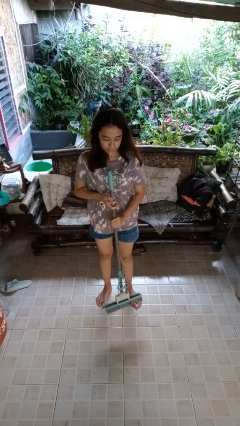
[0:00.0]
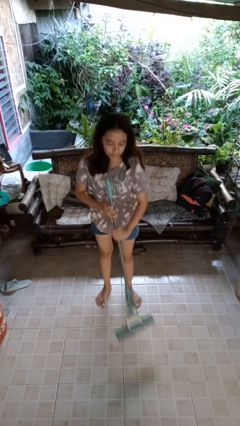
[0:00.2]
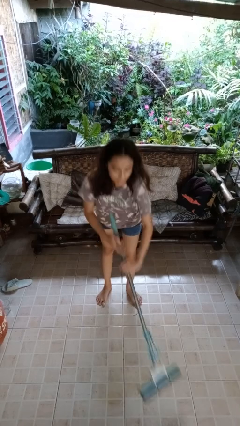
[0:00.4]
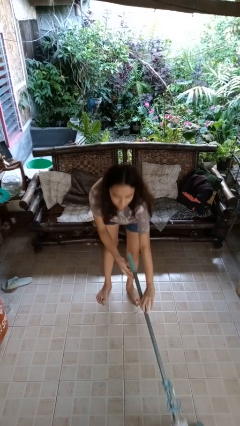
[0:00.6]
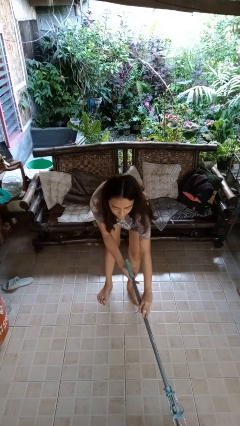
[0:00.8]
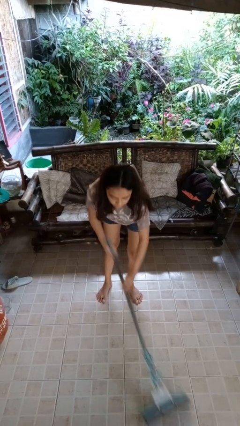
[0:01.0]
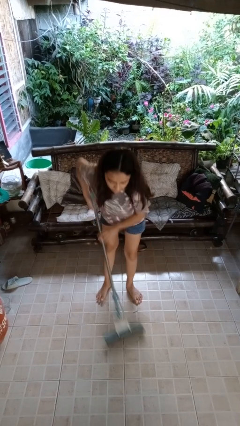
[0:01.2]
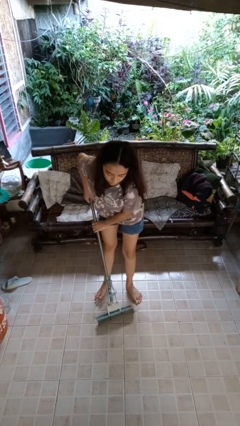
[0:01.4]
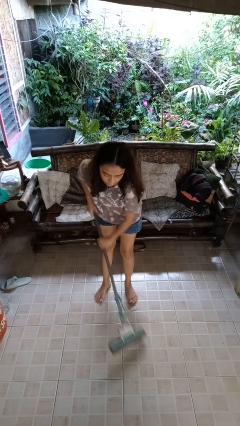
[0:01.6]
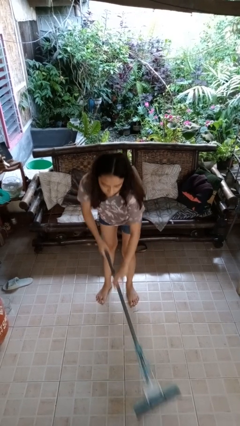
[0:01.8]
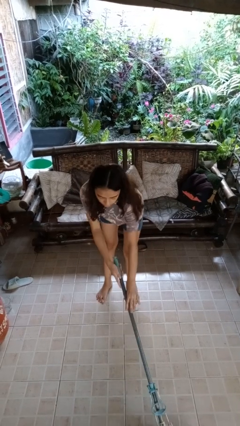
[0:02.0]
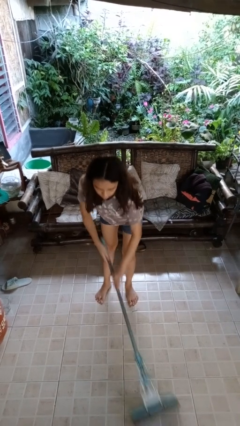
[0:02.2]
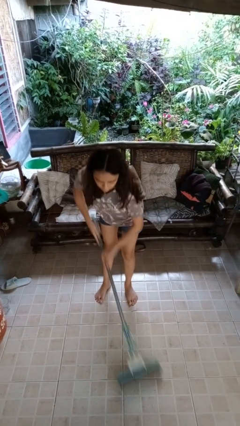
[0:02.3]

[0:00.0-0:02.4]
person mops

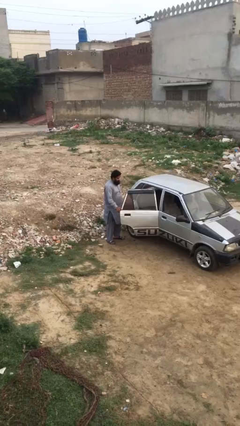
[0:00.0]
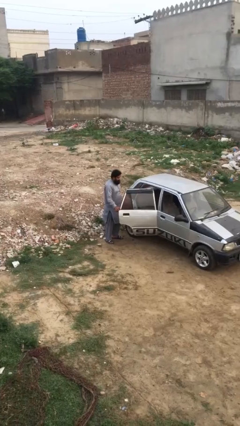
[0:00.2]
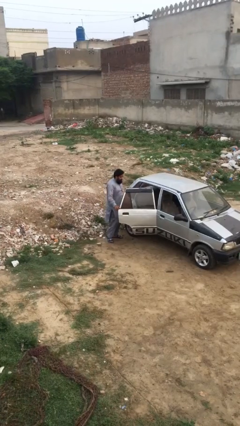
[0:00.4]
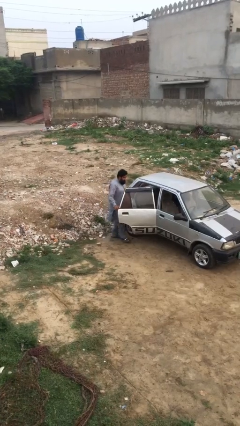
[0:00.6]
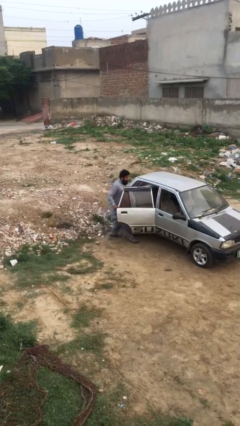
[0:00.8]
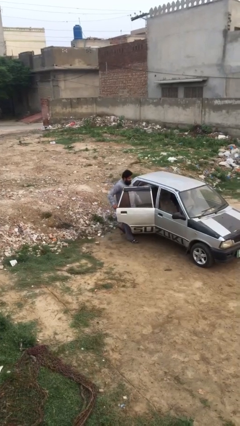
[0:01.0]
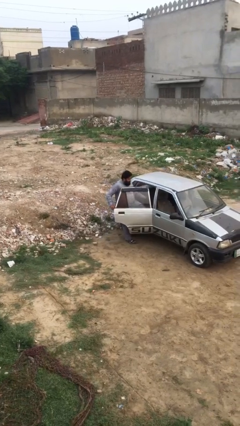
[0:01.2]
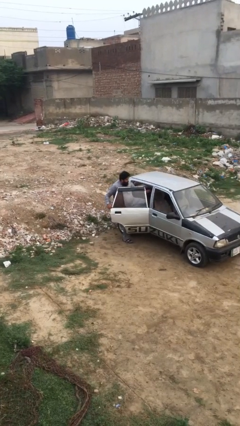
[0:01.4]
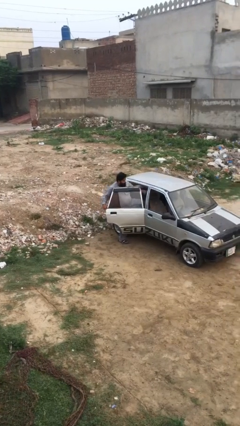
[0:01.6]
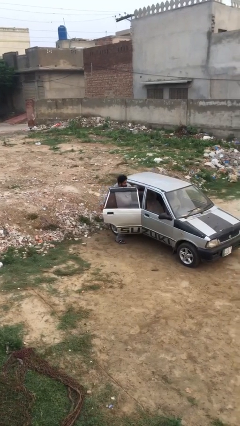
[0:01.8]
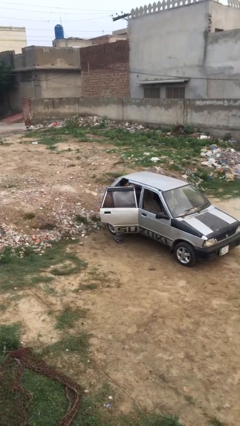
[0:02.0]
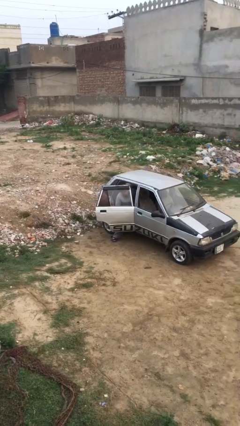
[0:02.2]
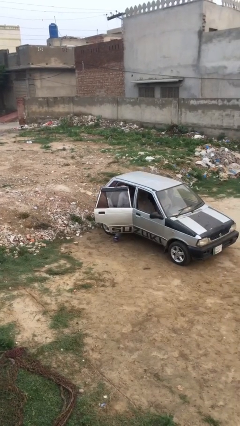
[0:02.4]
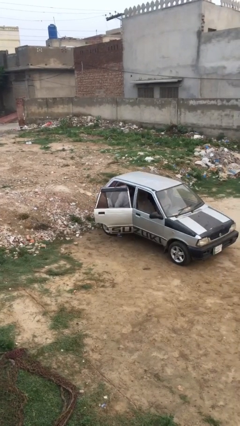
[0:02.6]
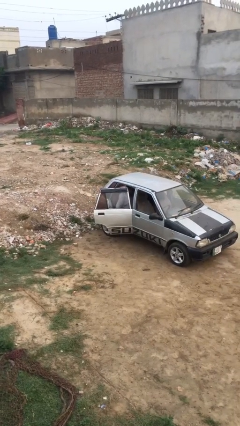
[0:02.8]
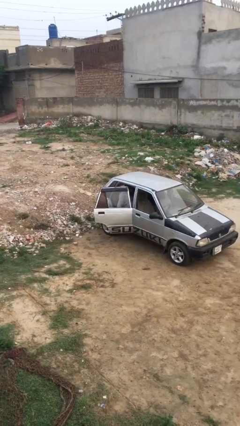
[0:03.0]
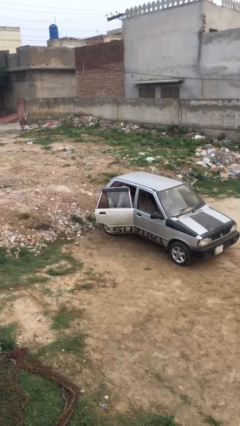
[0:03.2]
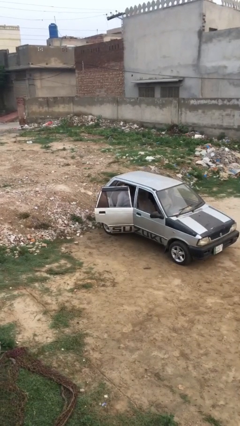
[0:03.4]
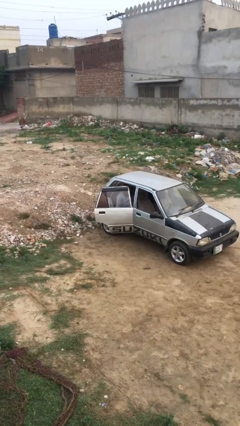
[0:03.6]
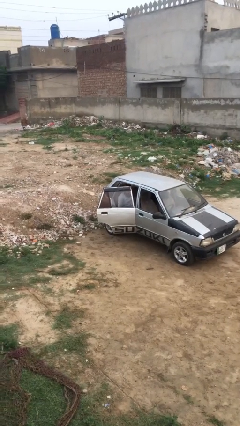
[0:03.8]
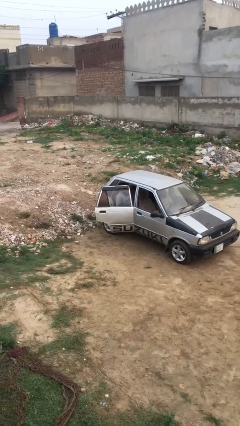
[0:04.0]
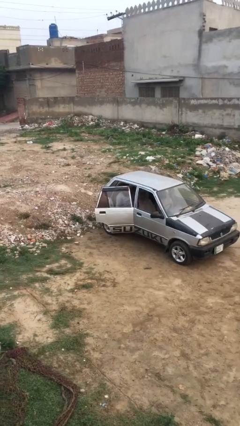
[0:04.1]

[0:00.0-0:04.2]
person enters car

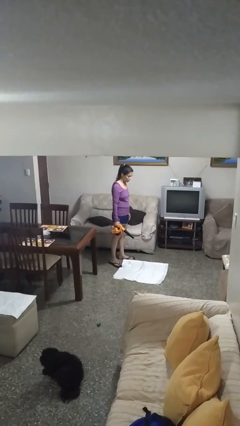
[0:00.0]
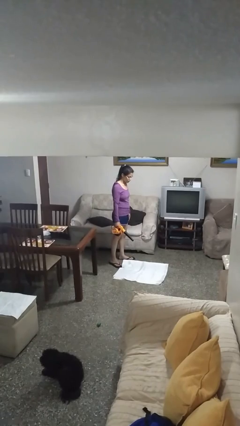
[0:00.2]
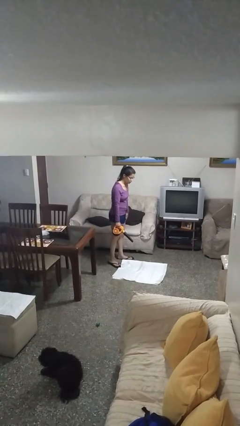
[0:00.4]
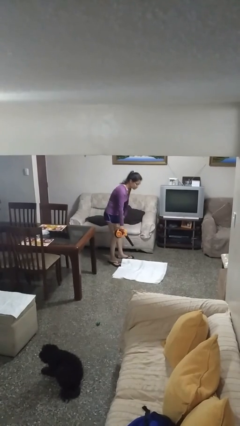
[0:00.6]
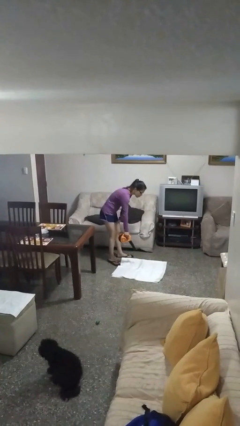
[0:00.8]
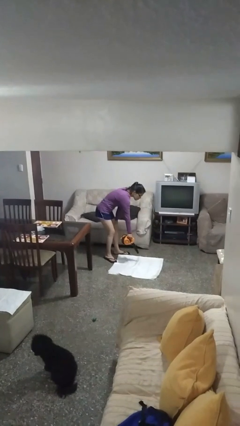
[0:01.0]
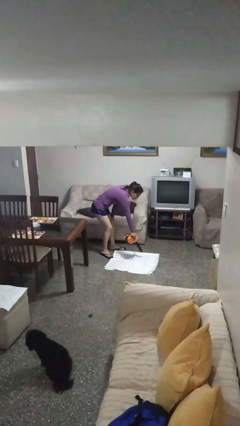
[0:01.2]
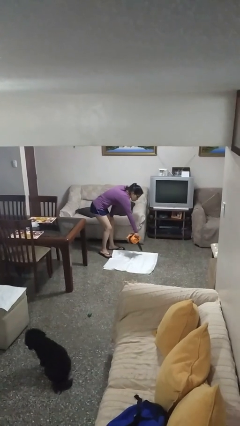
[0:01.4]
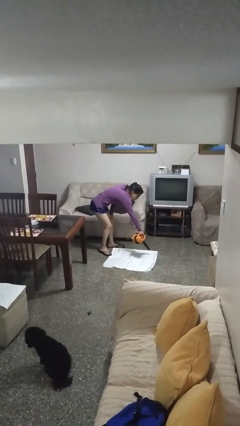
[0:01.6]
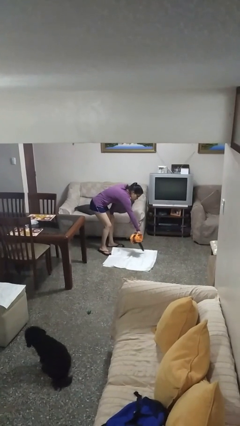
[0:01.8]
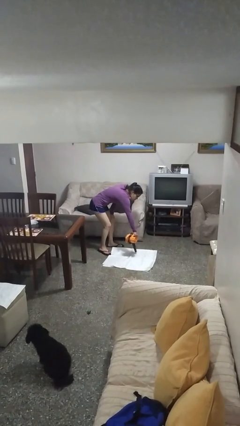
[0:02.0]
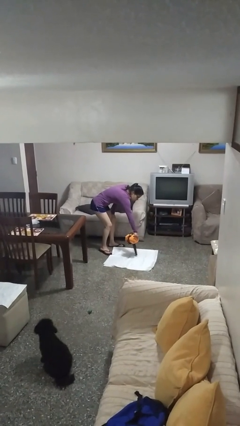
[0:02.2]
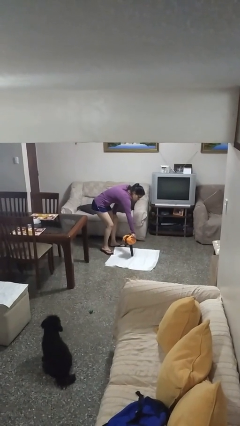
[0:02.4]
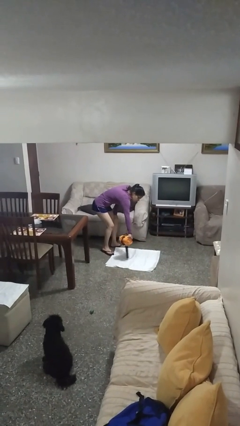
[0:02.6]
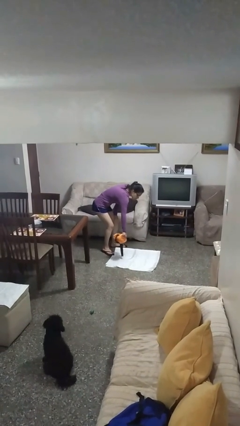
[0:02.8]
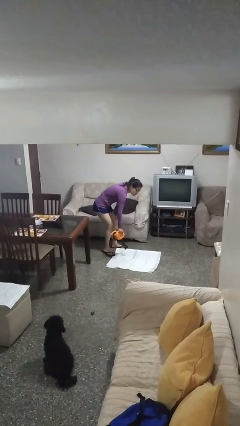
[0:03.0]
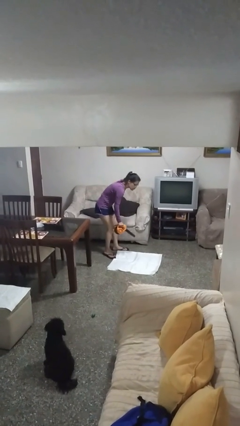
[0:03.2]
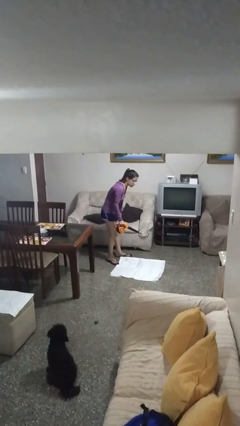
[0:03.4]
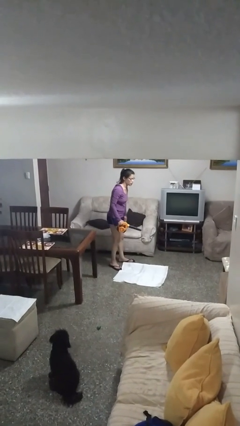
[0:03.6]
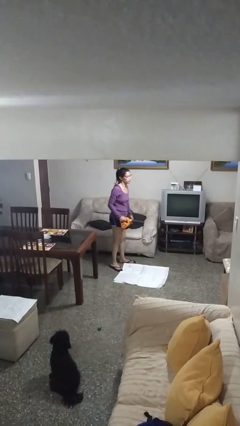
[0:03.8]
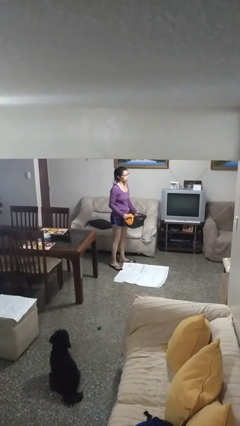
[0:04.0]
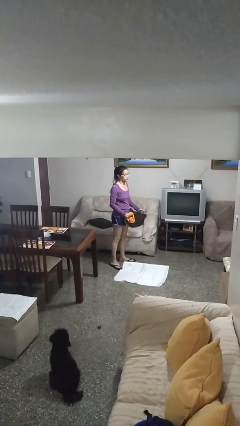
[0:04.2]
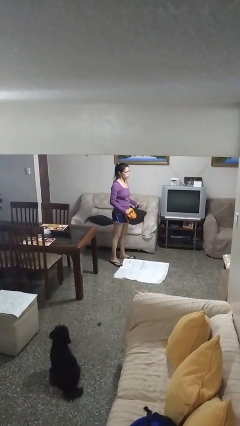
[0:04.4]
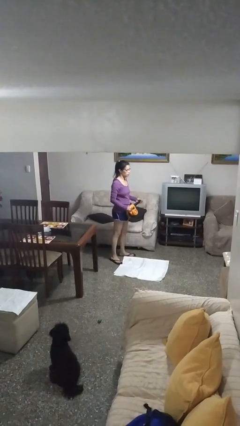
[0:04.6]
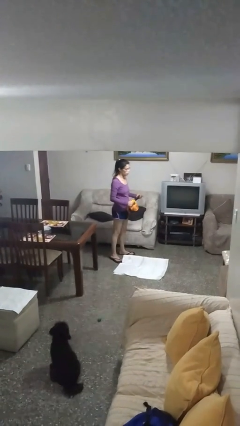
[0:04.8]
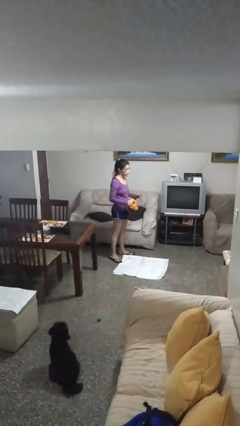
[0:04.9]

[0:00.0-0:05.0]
person vacuums carpet

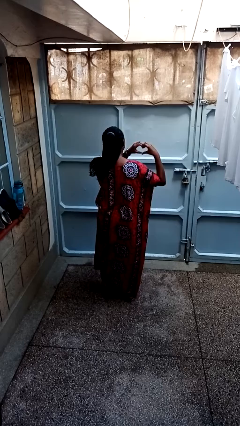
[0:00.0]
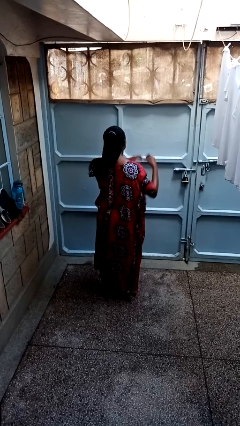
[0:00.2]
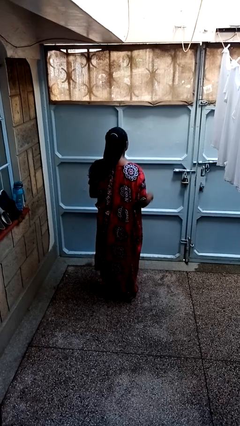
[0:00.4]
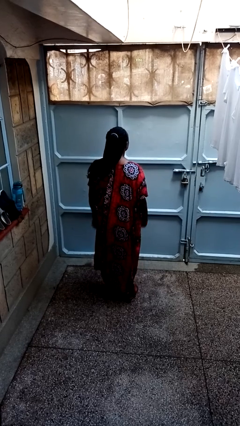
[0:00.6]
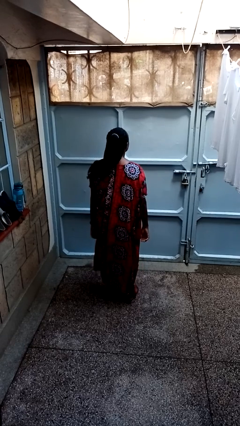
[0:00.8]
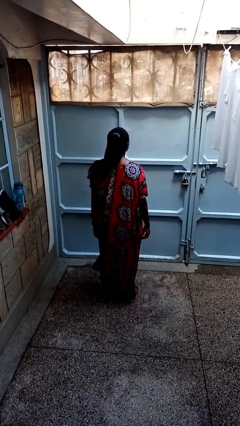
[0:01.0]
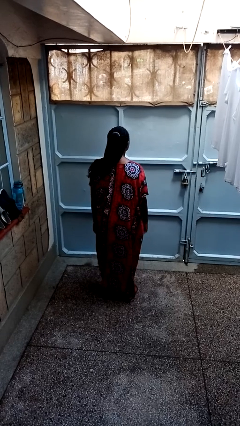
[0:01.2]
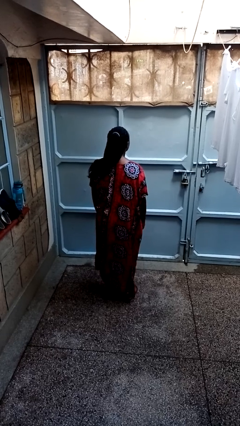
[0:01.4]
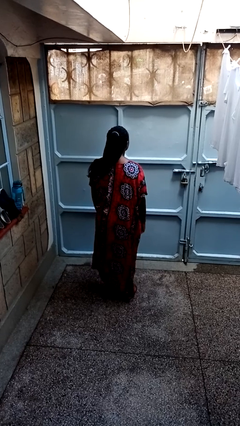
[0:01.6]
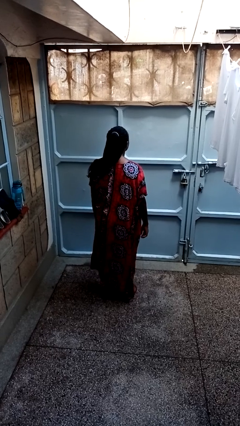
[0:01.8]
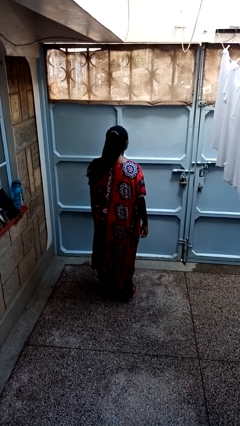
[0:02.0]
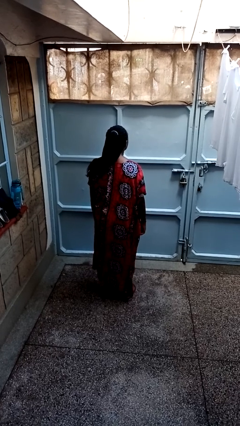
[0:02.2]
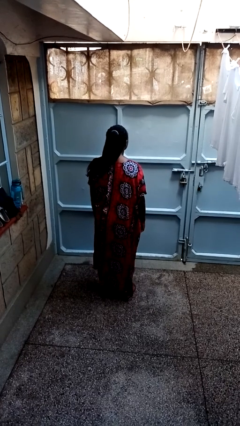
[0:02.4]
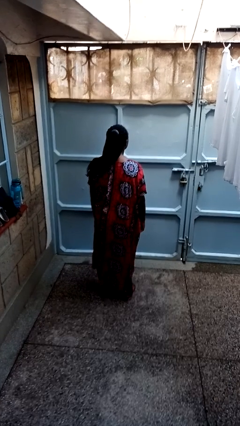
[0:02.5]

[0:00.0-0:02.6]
person gestures heart

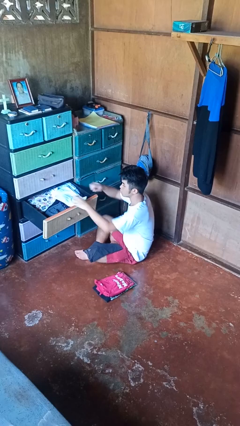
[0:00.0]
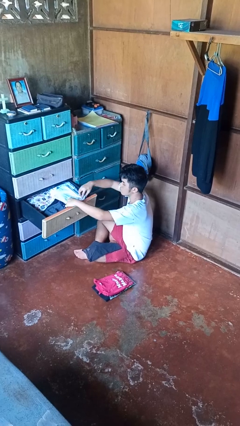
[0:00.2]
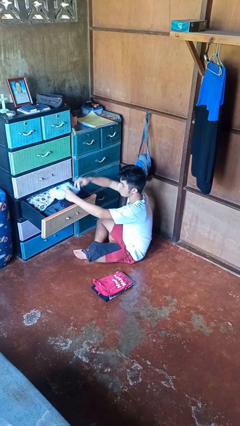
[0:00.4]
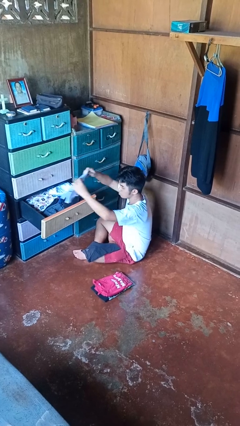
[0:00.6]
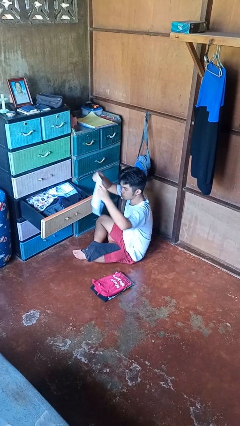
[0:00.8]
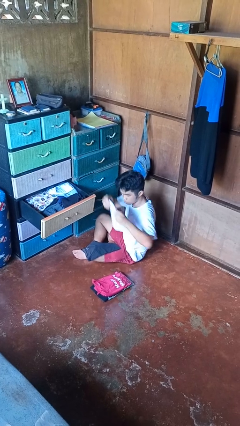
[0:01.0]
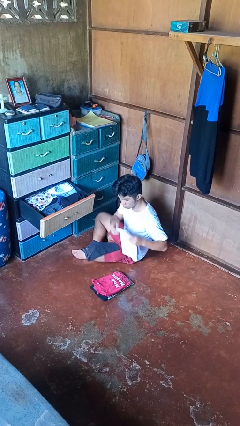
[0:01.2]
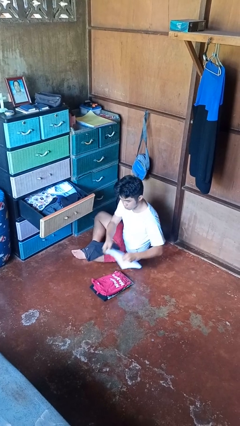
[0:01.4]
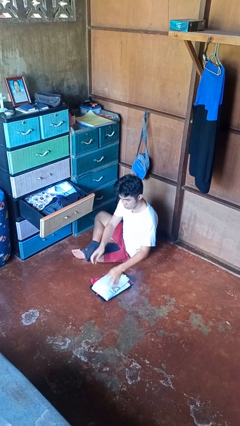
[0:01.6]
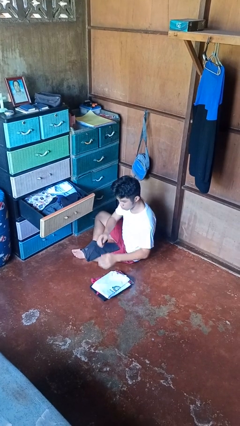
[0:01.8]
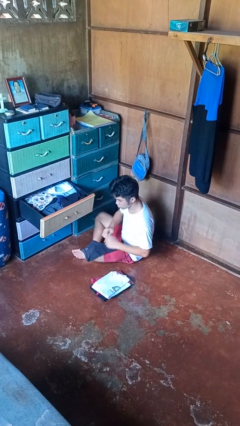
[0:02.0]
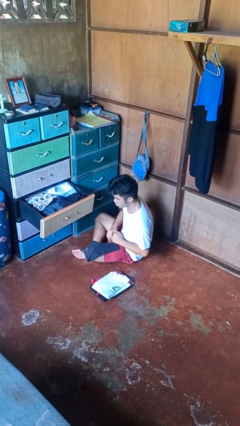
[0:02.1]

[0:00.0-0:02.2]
person takes clothes from dresser

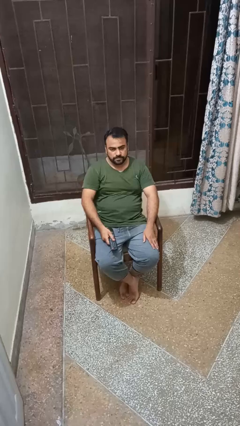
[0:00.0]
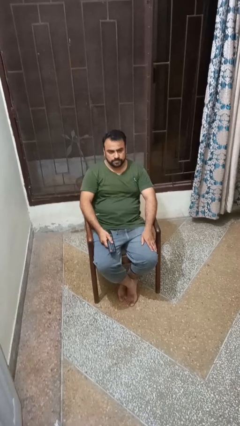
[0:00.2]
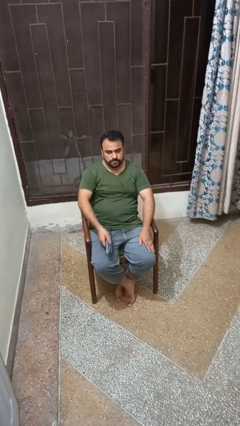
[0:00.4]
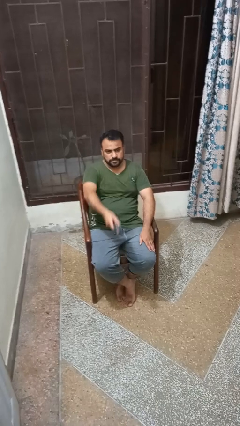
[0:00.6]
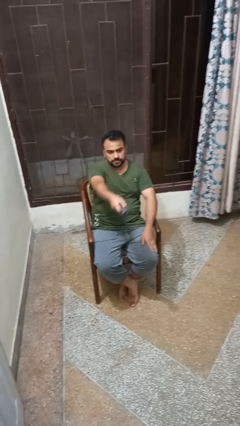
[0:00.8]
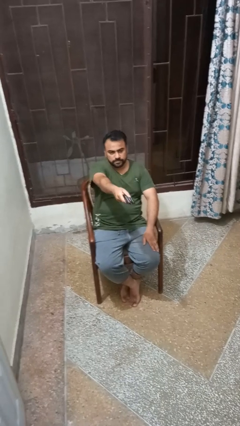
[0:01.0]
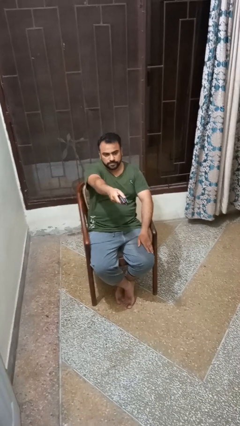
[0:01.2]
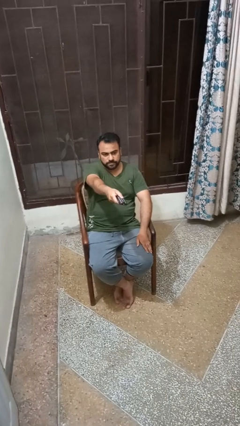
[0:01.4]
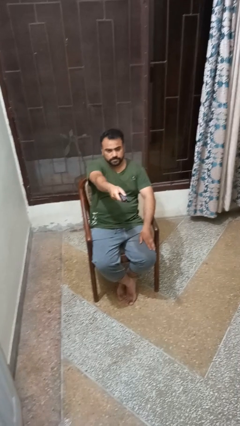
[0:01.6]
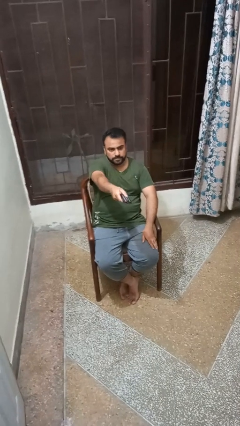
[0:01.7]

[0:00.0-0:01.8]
person uses television remote
